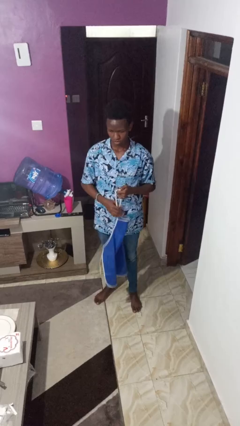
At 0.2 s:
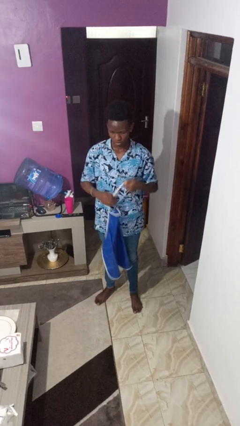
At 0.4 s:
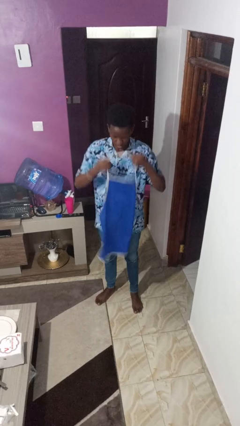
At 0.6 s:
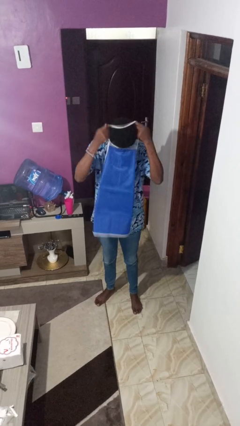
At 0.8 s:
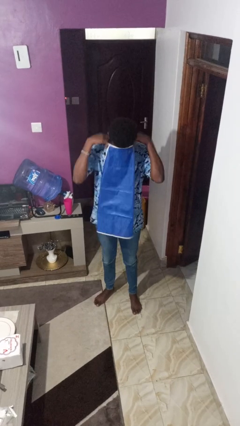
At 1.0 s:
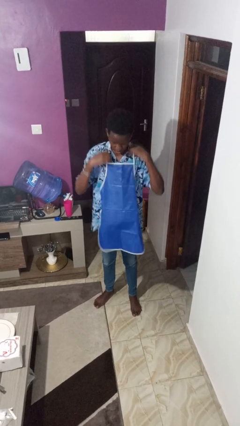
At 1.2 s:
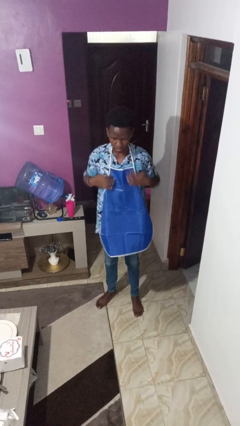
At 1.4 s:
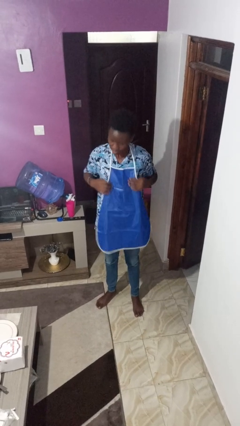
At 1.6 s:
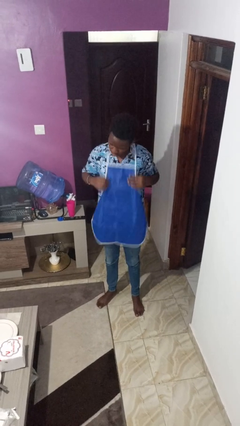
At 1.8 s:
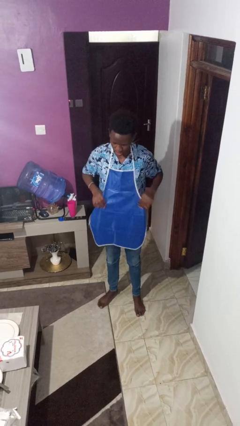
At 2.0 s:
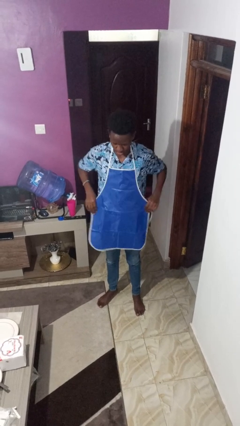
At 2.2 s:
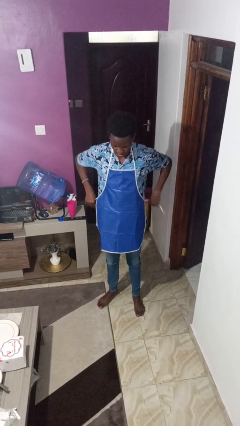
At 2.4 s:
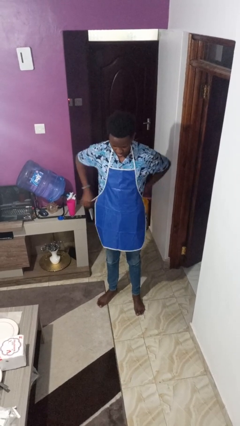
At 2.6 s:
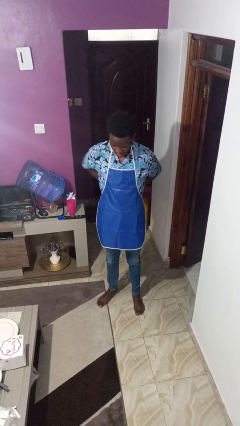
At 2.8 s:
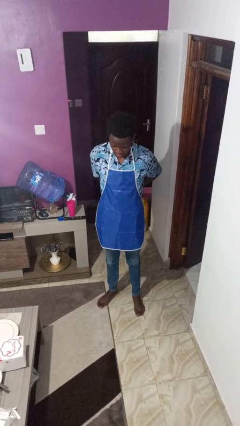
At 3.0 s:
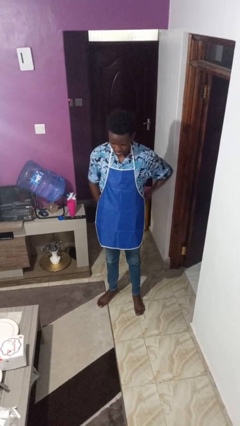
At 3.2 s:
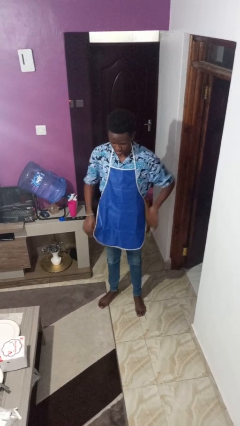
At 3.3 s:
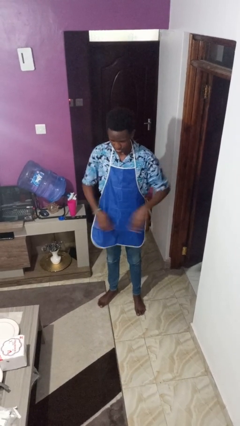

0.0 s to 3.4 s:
person puts on apron

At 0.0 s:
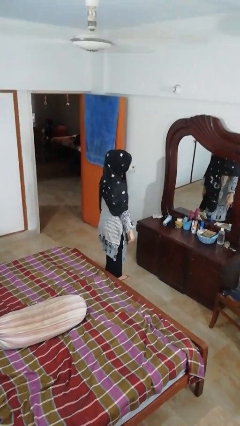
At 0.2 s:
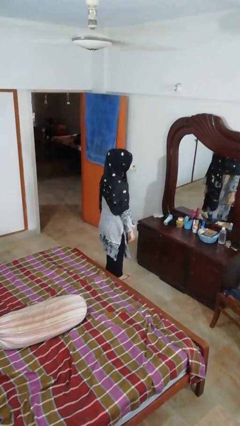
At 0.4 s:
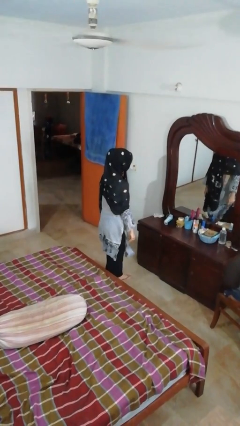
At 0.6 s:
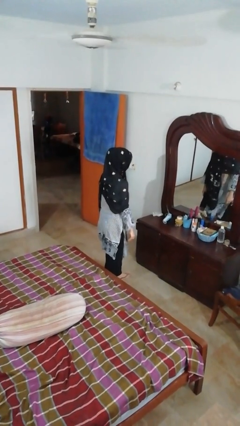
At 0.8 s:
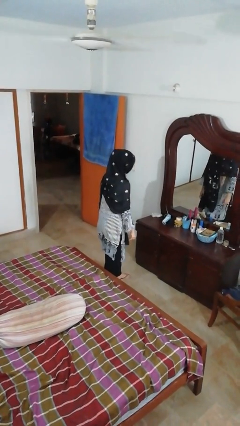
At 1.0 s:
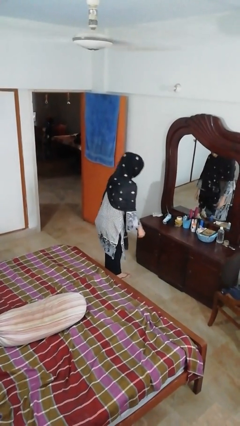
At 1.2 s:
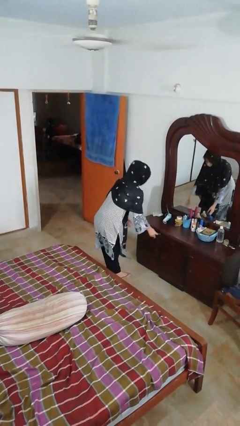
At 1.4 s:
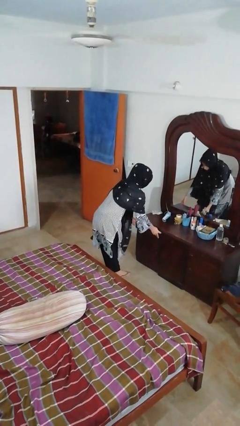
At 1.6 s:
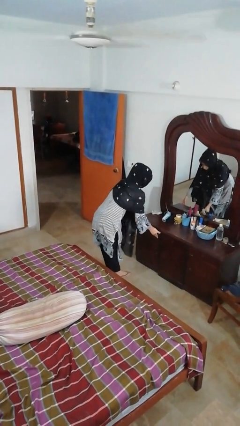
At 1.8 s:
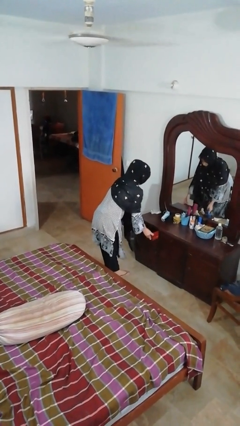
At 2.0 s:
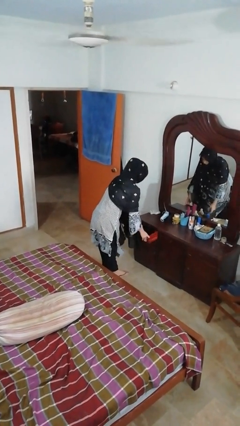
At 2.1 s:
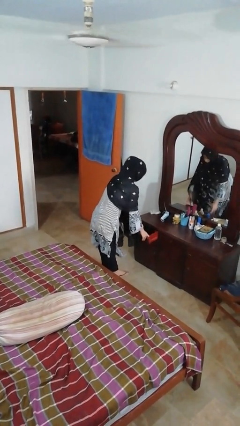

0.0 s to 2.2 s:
person opens dresser drawer

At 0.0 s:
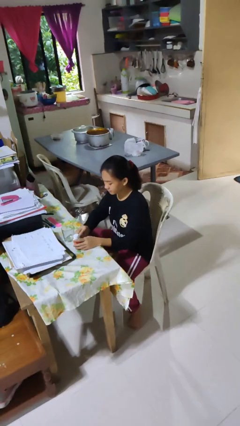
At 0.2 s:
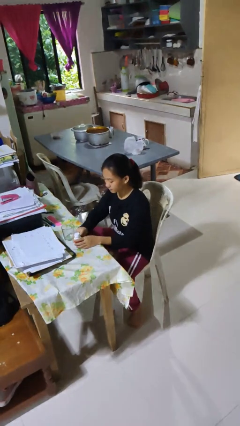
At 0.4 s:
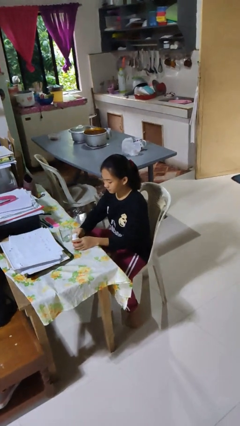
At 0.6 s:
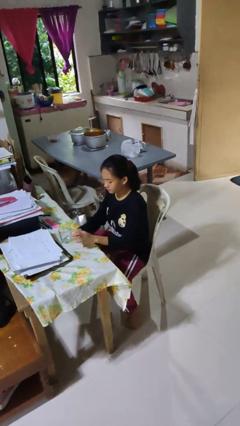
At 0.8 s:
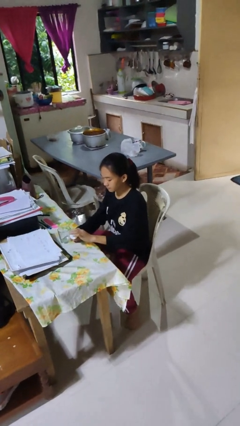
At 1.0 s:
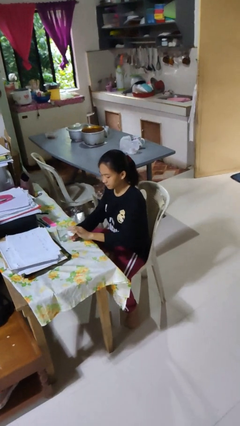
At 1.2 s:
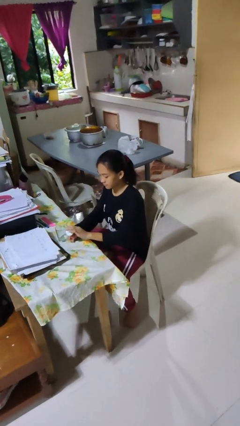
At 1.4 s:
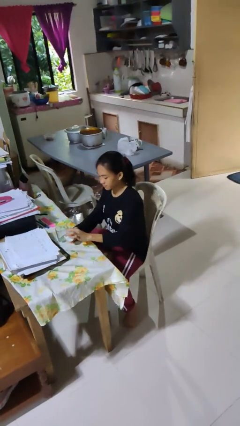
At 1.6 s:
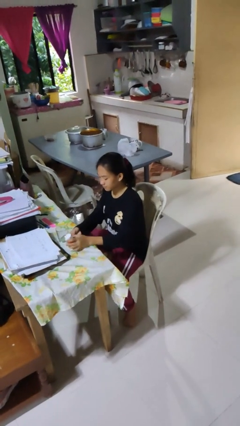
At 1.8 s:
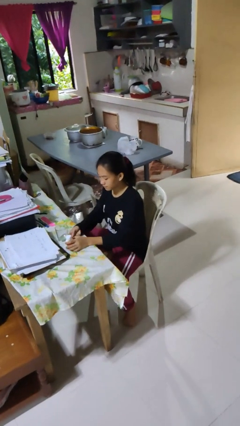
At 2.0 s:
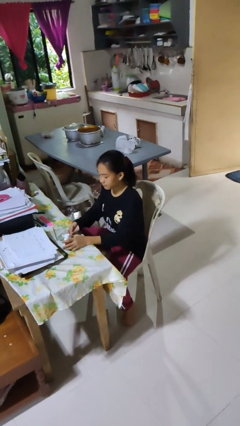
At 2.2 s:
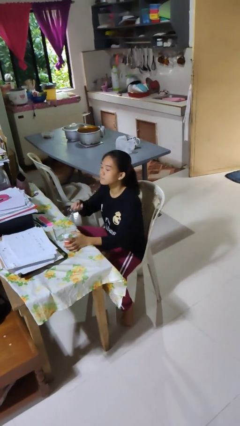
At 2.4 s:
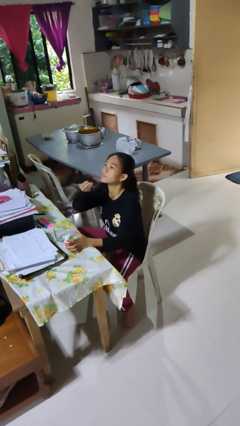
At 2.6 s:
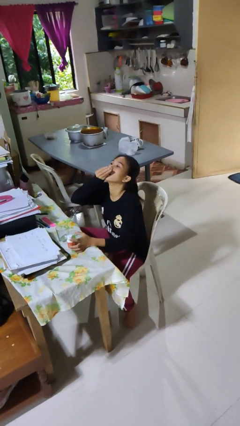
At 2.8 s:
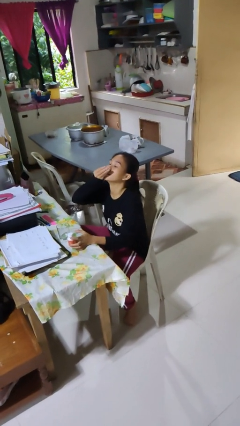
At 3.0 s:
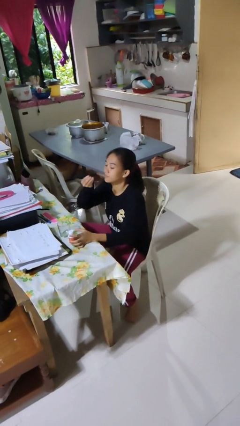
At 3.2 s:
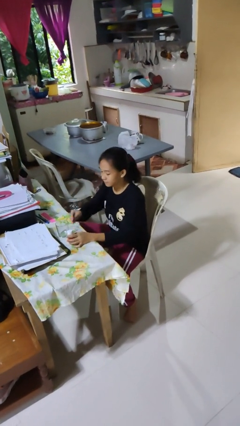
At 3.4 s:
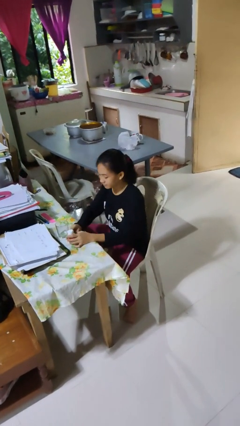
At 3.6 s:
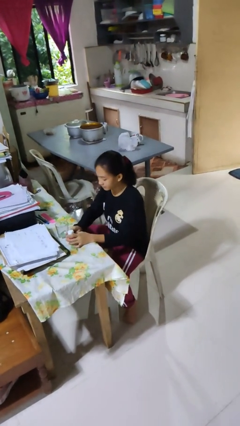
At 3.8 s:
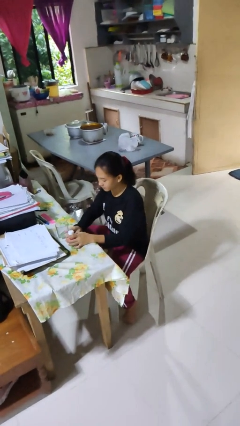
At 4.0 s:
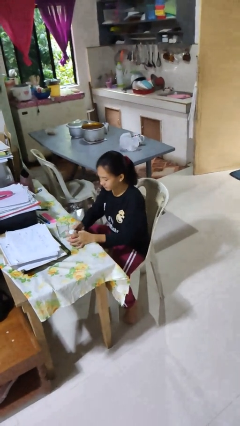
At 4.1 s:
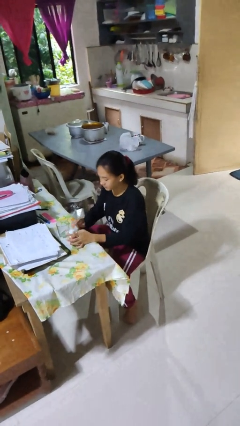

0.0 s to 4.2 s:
person takes medicine pills

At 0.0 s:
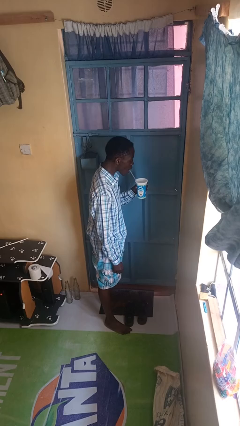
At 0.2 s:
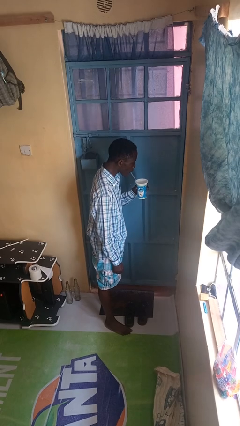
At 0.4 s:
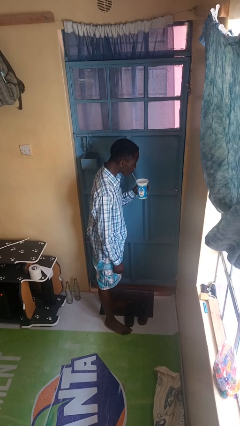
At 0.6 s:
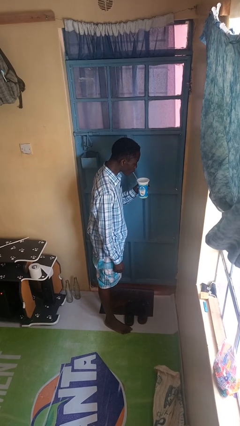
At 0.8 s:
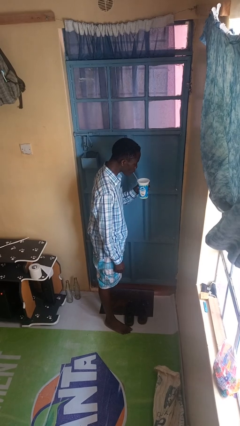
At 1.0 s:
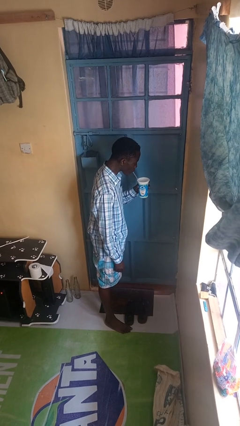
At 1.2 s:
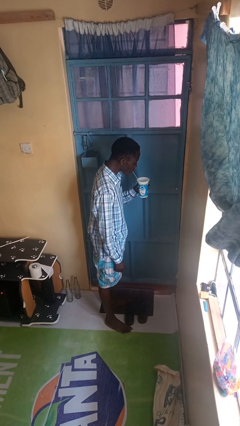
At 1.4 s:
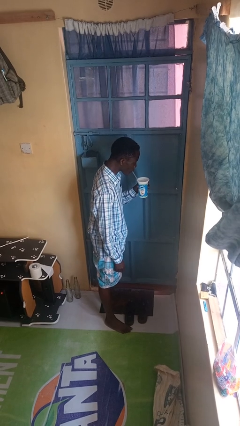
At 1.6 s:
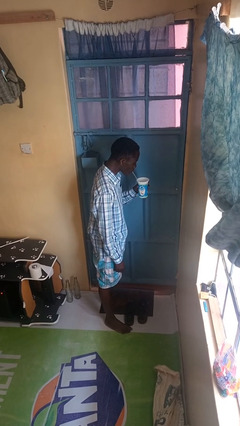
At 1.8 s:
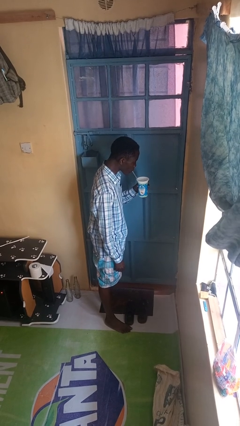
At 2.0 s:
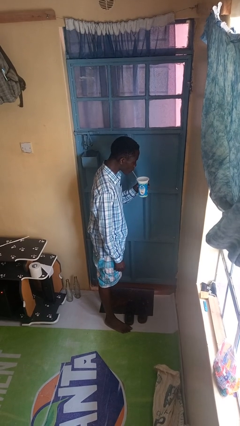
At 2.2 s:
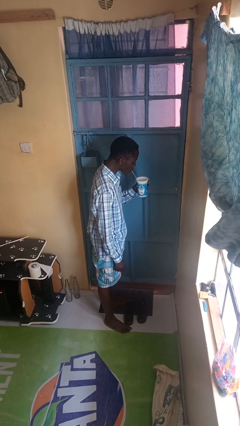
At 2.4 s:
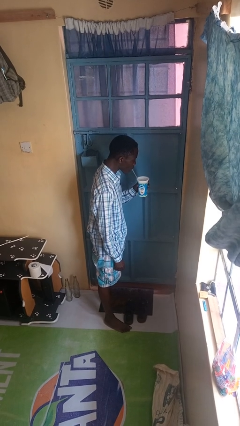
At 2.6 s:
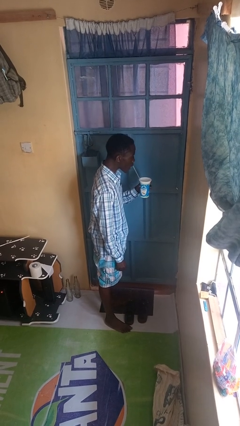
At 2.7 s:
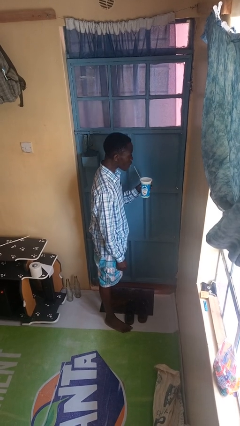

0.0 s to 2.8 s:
person drinks from straw

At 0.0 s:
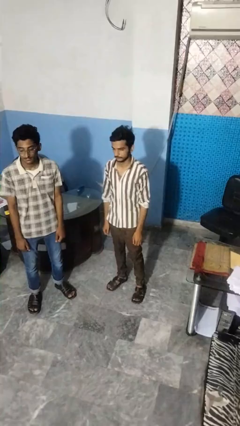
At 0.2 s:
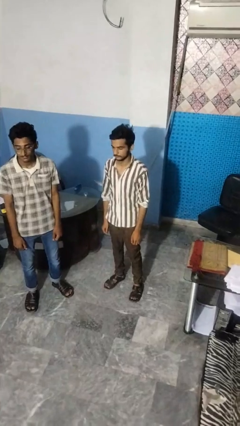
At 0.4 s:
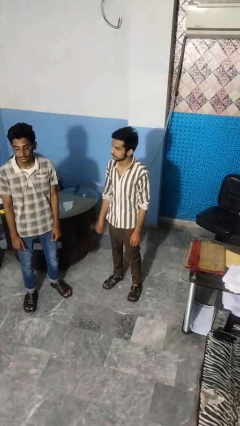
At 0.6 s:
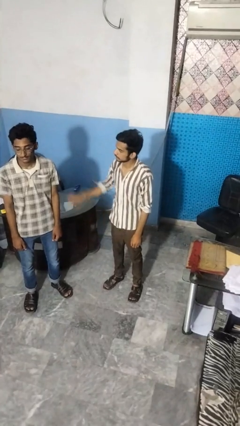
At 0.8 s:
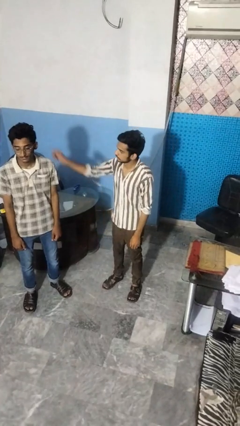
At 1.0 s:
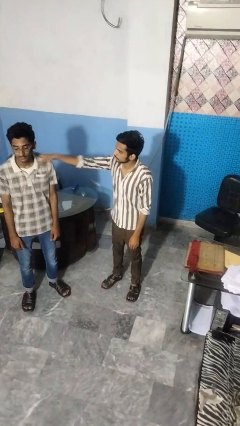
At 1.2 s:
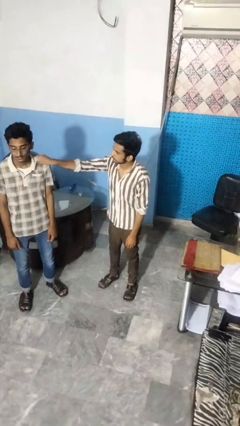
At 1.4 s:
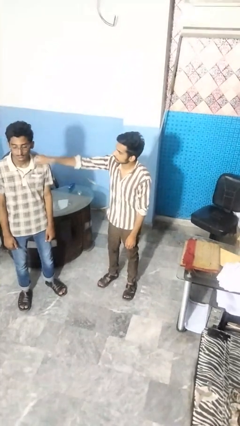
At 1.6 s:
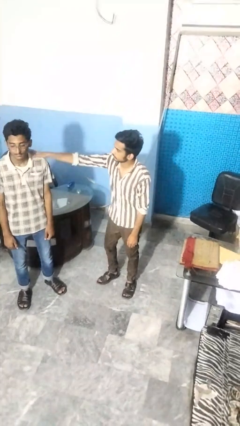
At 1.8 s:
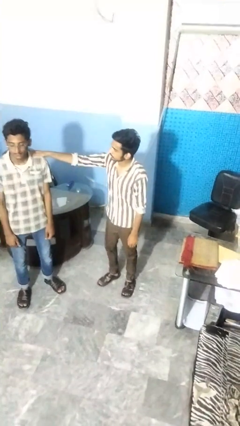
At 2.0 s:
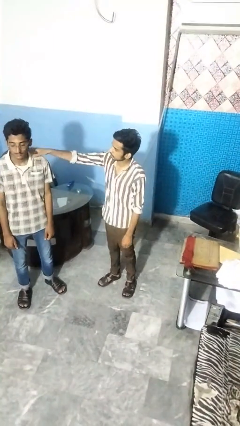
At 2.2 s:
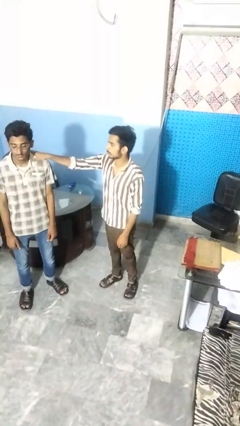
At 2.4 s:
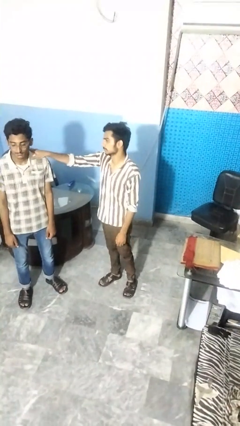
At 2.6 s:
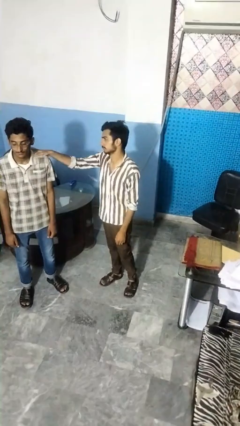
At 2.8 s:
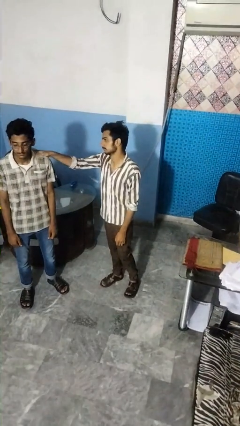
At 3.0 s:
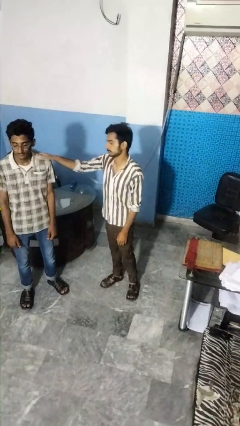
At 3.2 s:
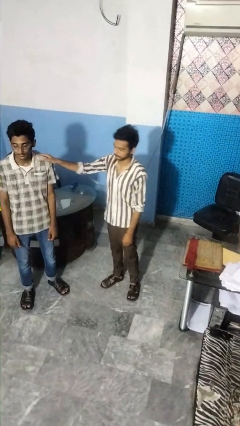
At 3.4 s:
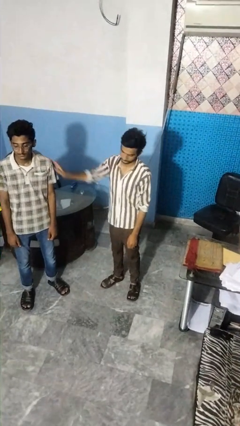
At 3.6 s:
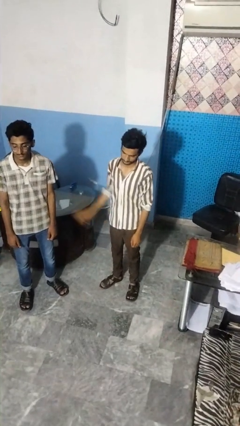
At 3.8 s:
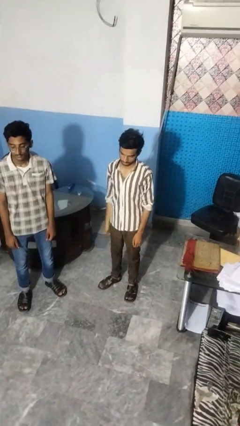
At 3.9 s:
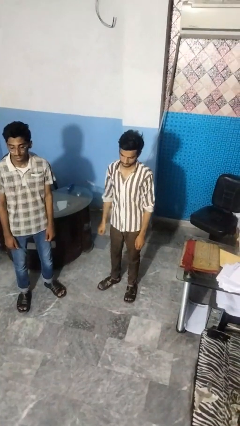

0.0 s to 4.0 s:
person pounds shoulders of person

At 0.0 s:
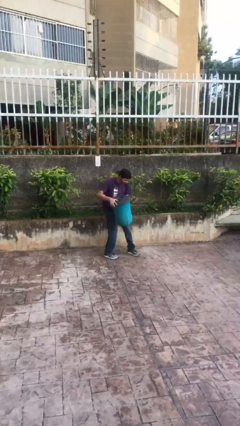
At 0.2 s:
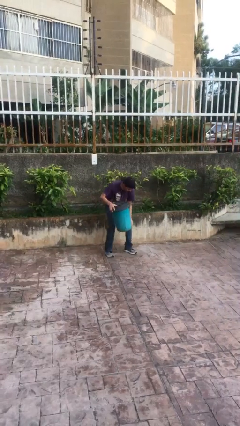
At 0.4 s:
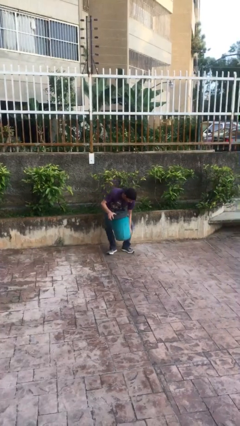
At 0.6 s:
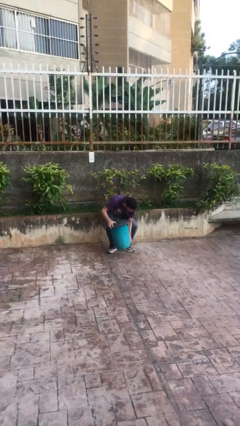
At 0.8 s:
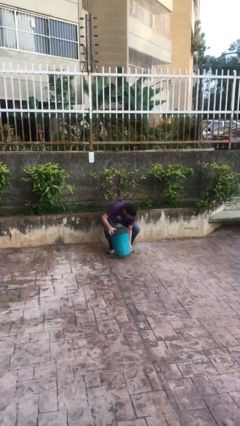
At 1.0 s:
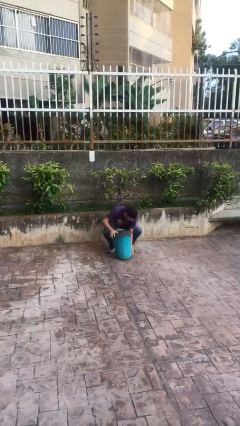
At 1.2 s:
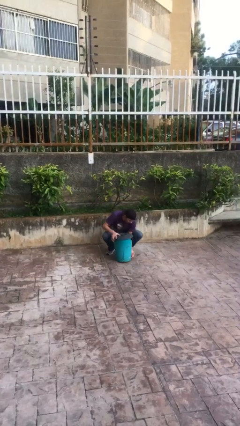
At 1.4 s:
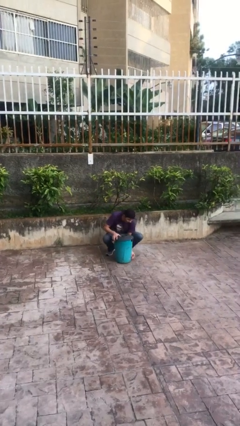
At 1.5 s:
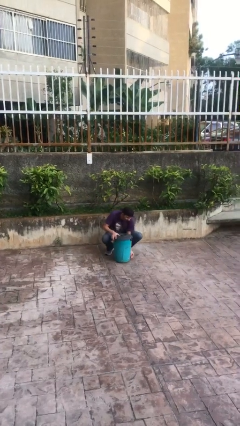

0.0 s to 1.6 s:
person puts down object on floor
